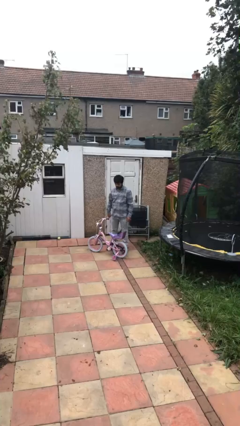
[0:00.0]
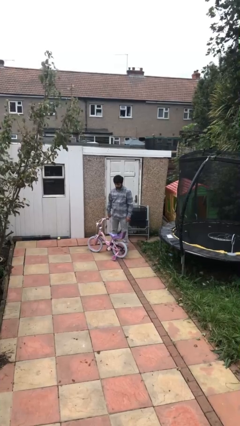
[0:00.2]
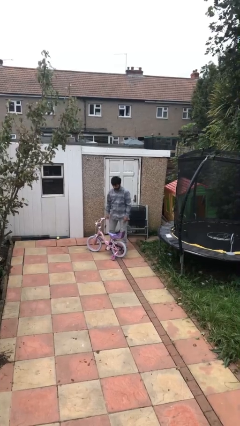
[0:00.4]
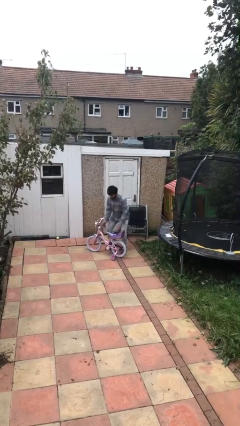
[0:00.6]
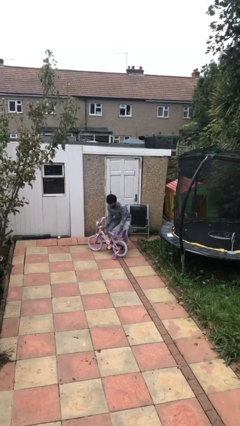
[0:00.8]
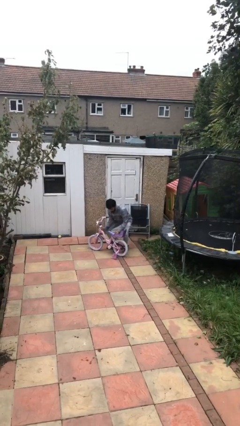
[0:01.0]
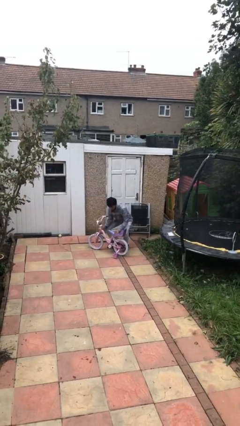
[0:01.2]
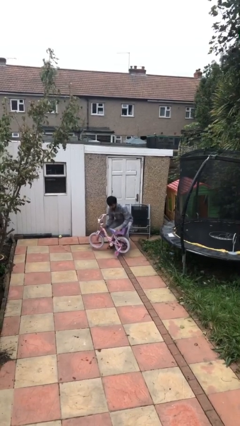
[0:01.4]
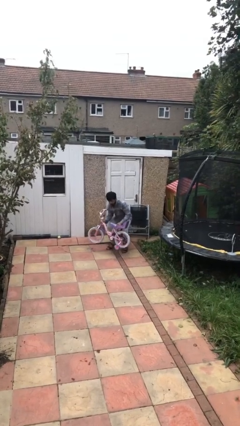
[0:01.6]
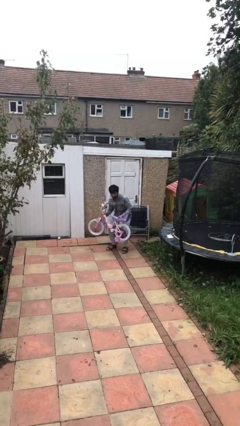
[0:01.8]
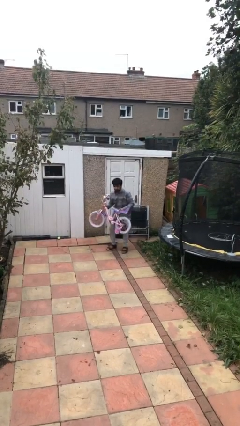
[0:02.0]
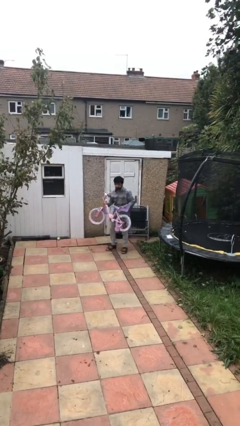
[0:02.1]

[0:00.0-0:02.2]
person picks up object from floor

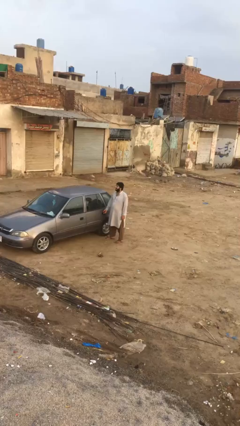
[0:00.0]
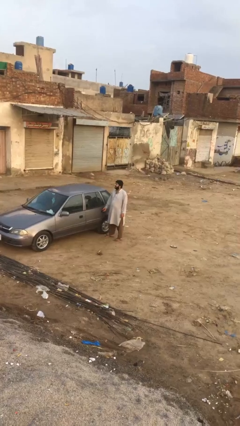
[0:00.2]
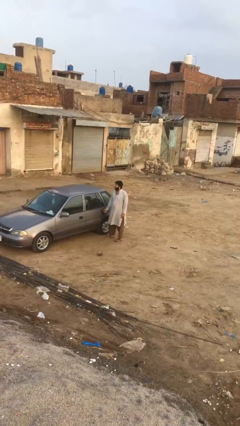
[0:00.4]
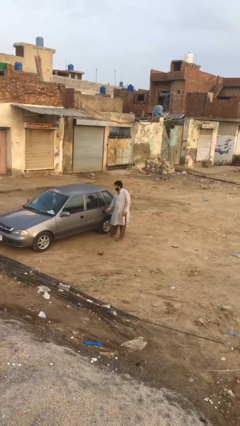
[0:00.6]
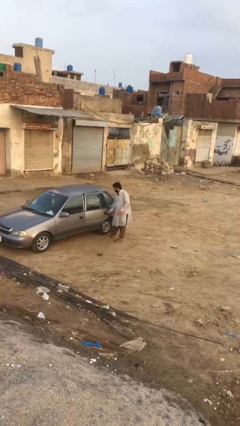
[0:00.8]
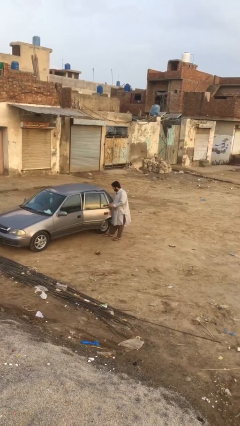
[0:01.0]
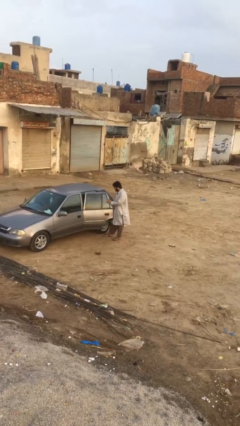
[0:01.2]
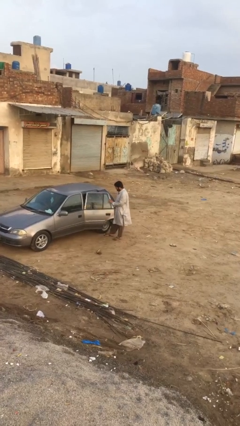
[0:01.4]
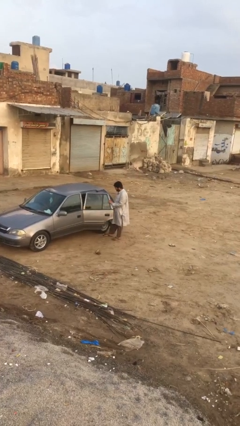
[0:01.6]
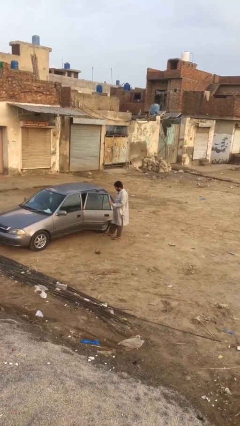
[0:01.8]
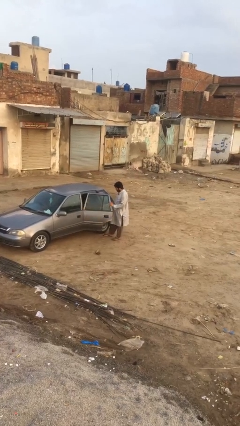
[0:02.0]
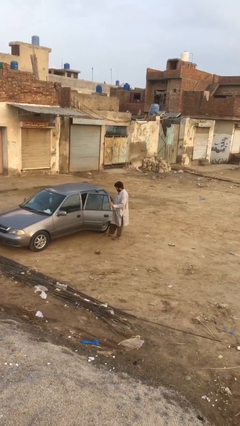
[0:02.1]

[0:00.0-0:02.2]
person opens car door

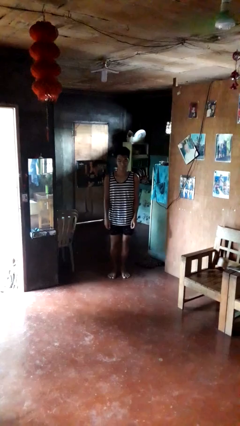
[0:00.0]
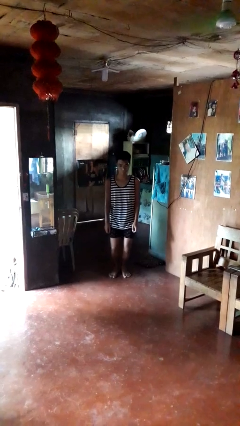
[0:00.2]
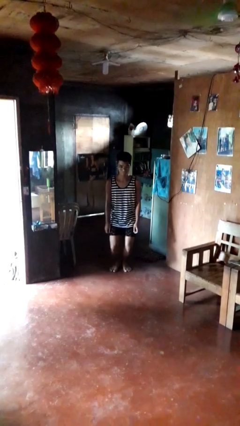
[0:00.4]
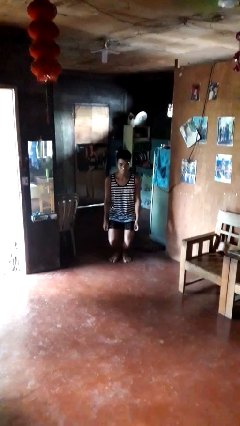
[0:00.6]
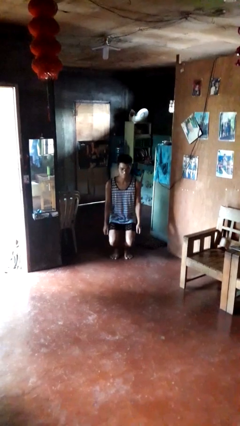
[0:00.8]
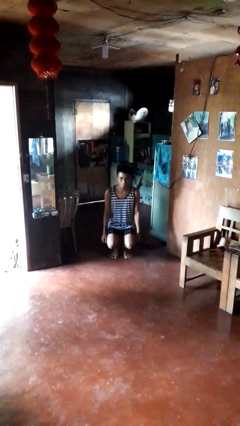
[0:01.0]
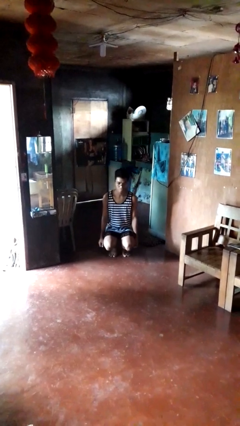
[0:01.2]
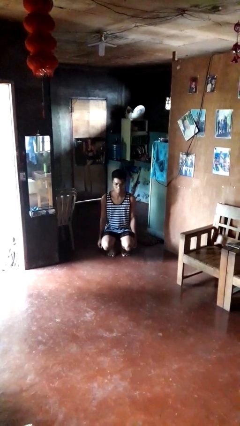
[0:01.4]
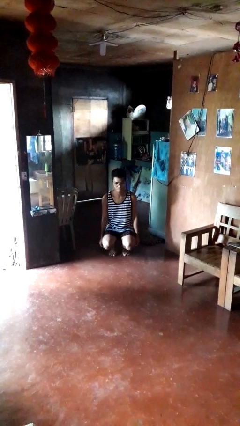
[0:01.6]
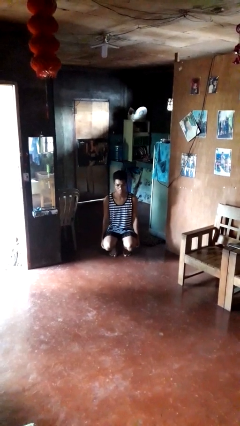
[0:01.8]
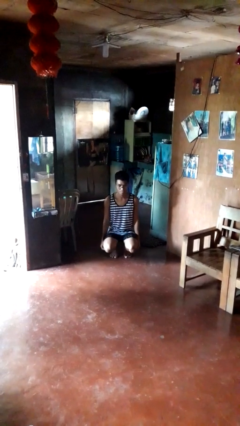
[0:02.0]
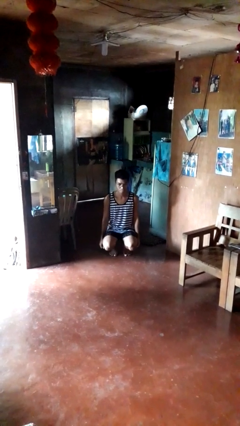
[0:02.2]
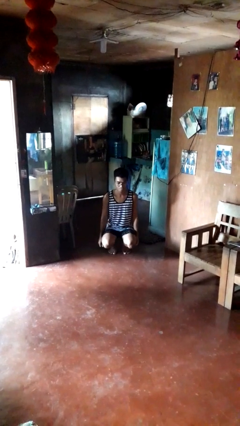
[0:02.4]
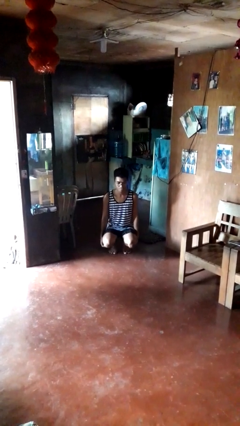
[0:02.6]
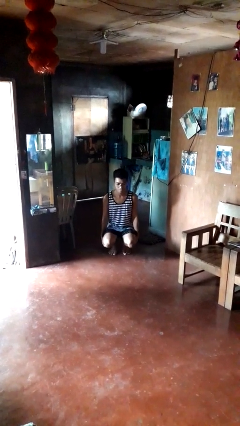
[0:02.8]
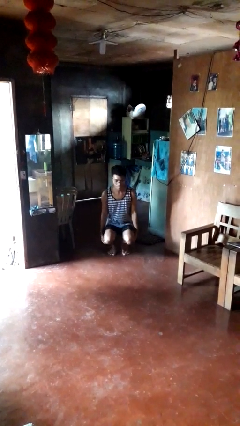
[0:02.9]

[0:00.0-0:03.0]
person squats

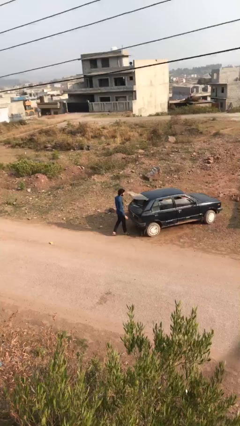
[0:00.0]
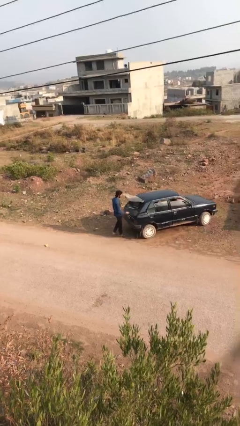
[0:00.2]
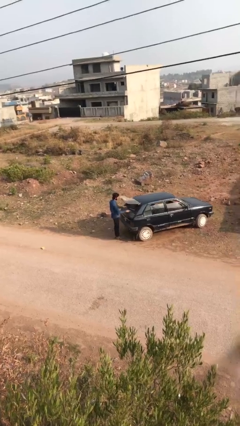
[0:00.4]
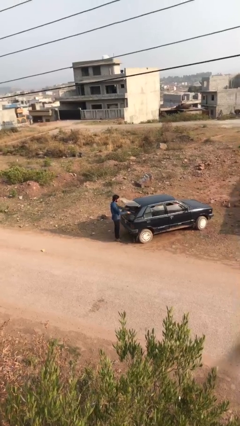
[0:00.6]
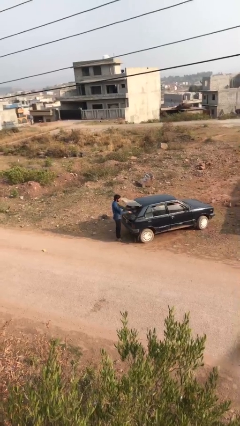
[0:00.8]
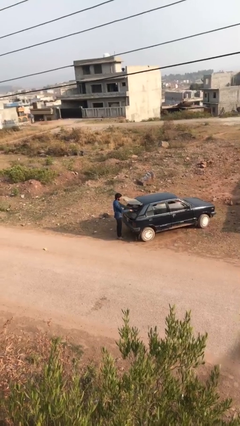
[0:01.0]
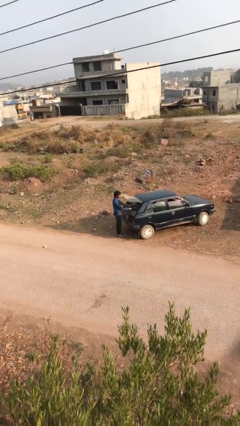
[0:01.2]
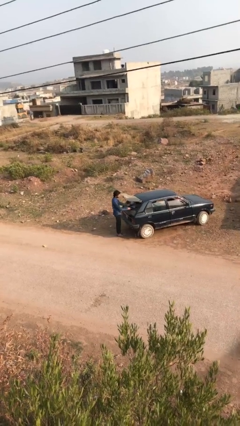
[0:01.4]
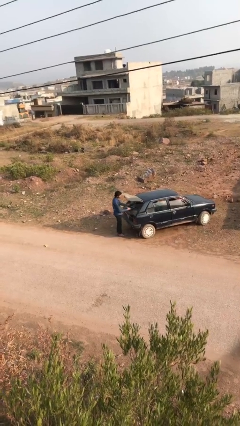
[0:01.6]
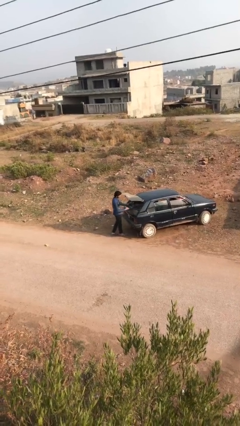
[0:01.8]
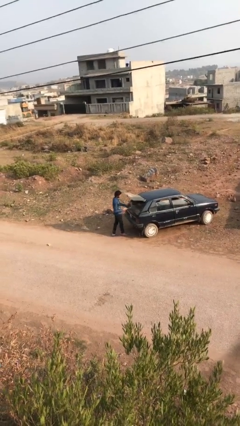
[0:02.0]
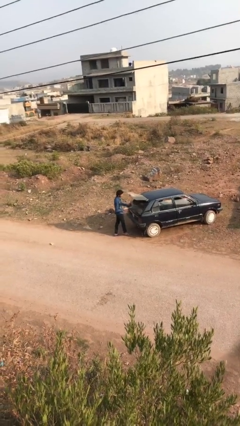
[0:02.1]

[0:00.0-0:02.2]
person unloads car

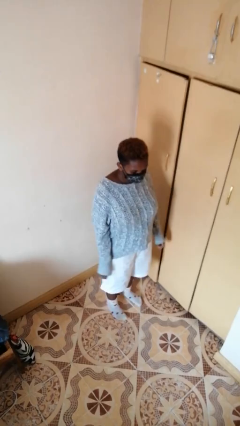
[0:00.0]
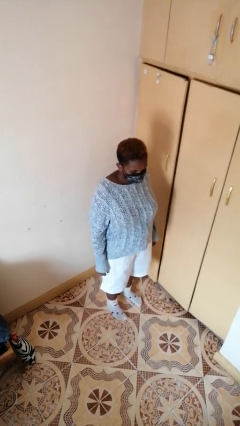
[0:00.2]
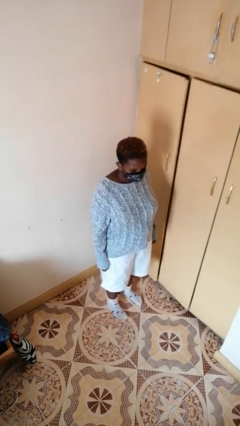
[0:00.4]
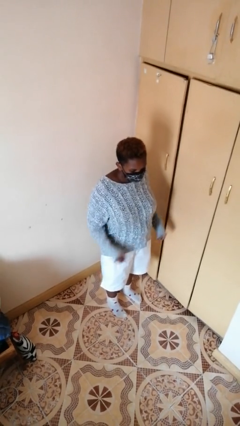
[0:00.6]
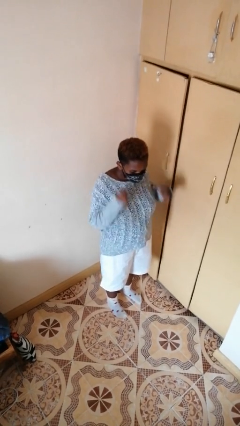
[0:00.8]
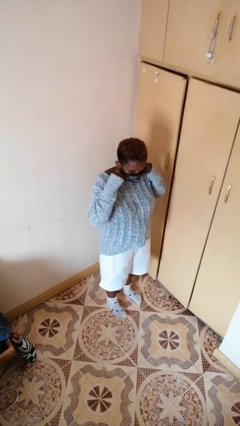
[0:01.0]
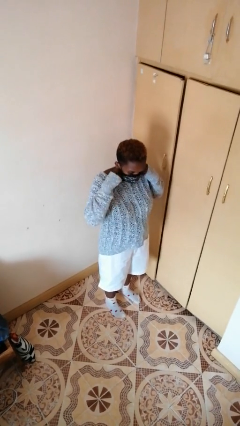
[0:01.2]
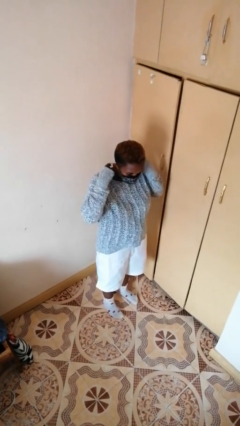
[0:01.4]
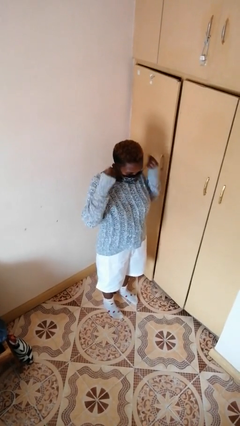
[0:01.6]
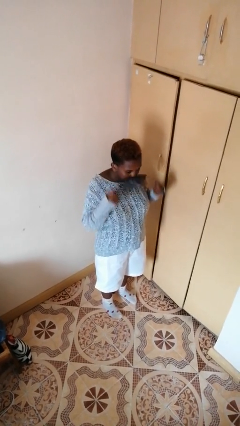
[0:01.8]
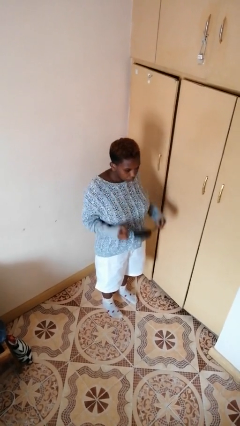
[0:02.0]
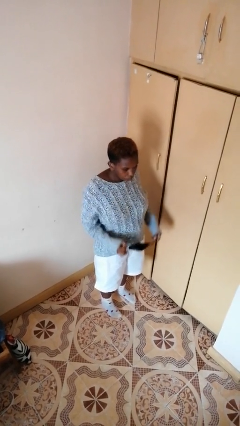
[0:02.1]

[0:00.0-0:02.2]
person takes off facemask

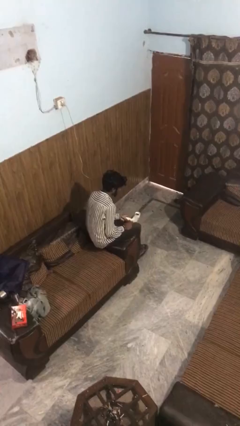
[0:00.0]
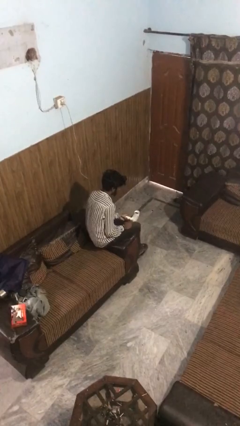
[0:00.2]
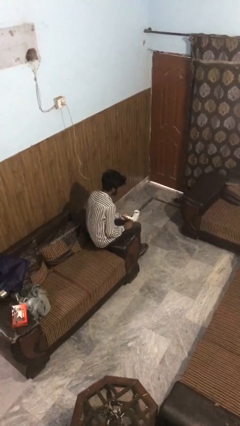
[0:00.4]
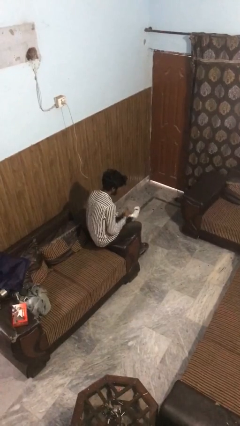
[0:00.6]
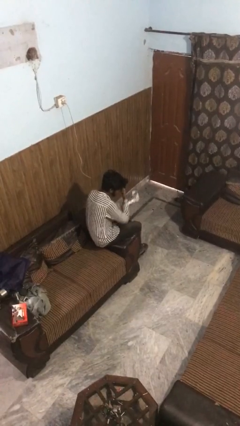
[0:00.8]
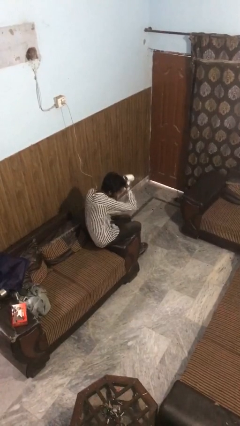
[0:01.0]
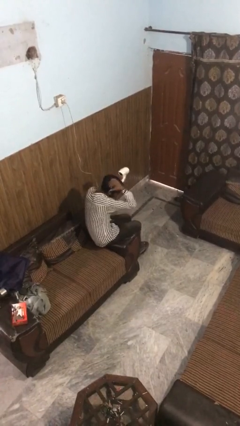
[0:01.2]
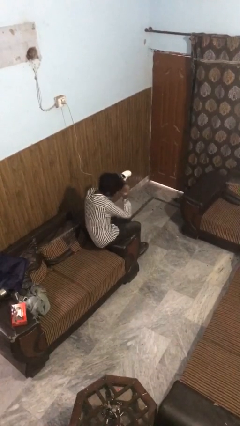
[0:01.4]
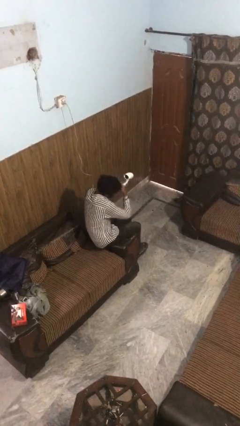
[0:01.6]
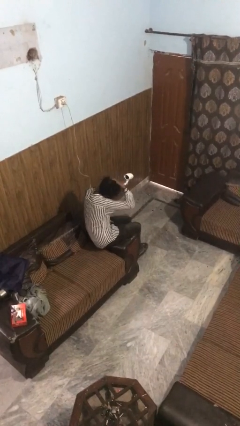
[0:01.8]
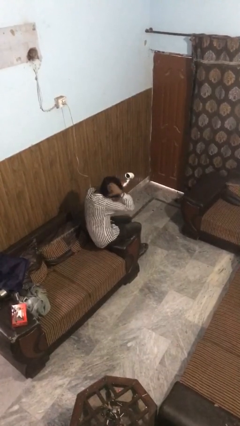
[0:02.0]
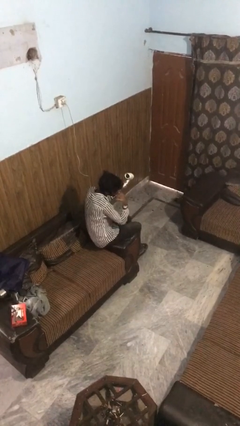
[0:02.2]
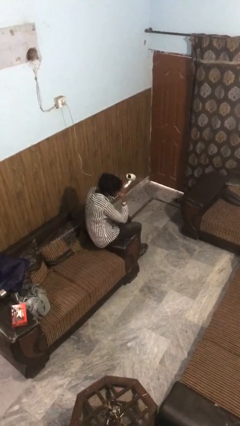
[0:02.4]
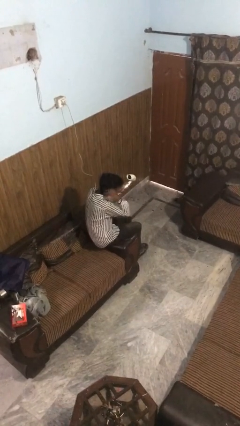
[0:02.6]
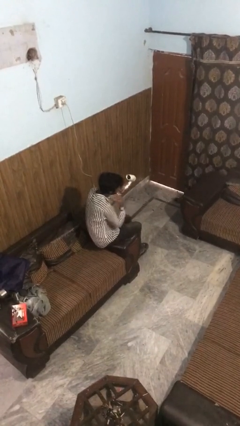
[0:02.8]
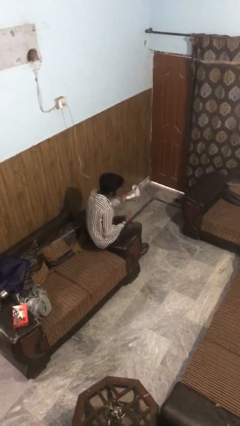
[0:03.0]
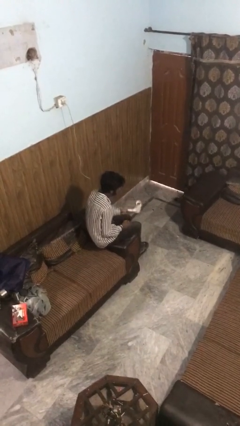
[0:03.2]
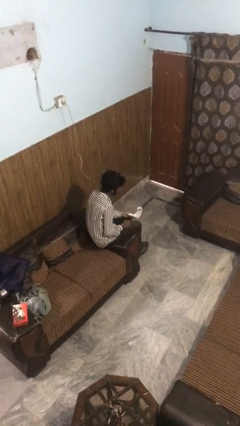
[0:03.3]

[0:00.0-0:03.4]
person dries hair with hairdryer

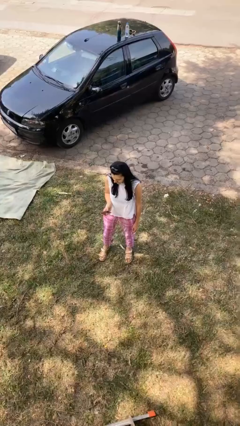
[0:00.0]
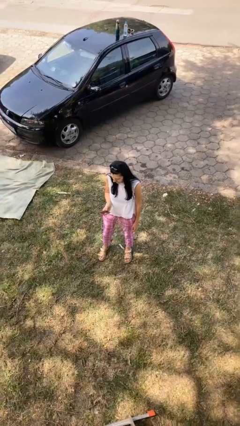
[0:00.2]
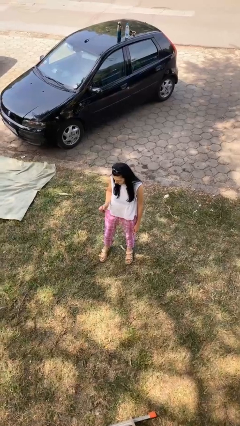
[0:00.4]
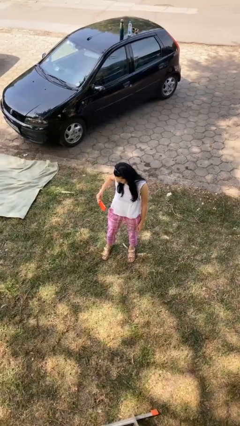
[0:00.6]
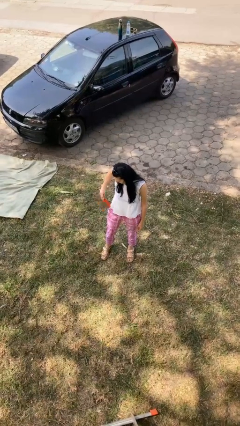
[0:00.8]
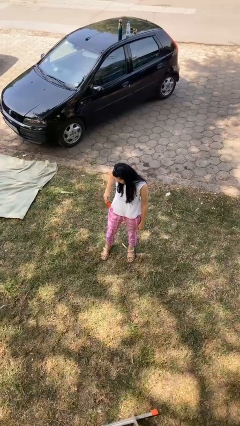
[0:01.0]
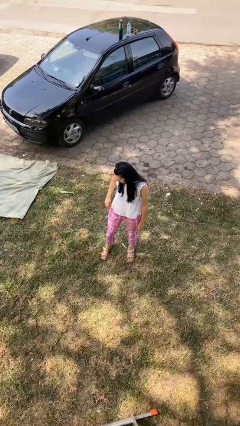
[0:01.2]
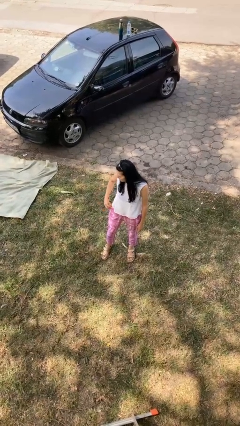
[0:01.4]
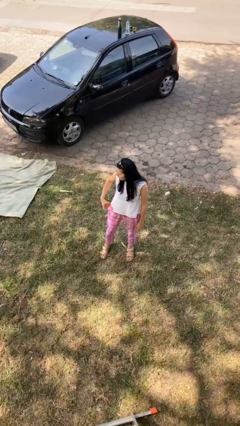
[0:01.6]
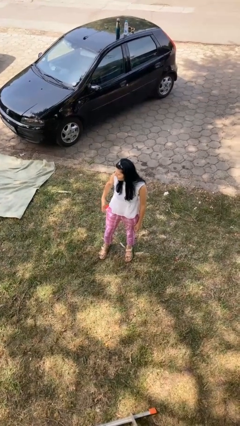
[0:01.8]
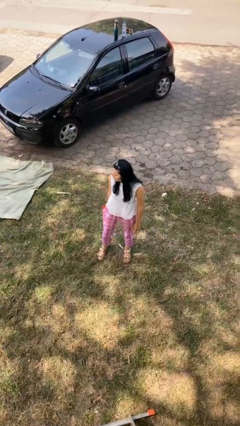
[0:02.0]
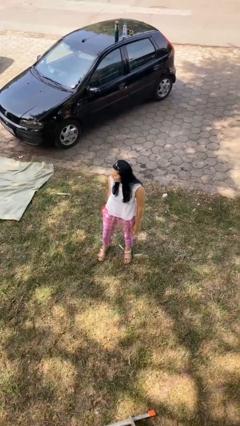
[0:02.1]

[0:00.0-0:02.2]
person puts phone into pocket
